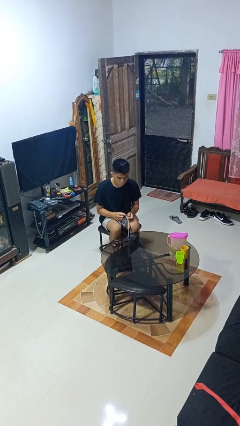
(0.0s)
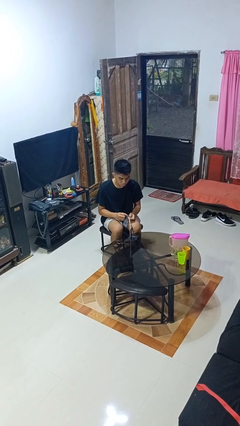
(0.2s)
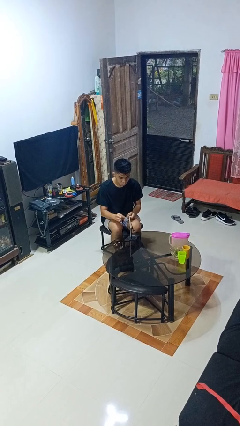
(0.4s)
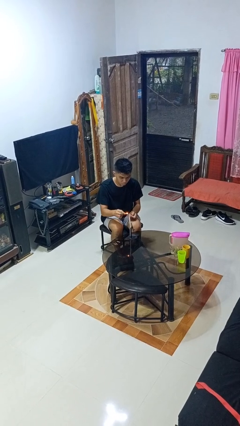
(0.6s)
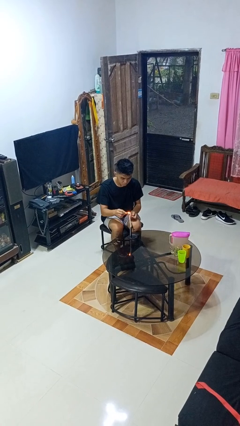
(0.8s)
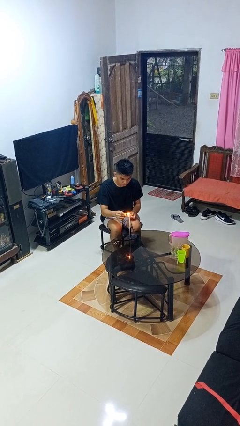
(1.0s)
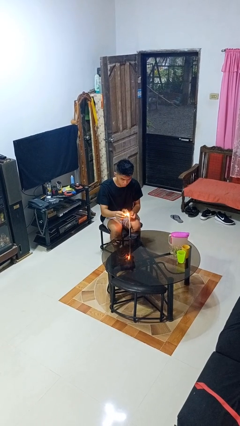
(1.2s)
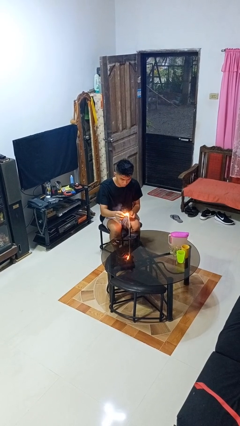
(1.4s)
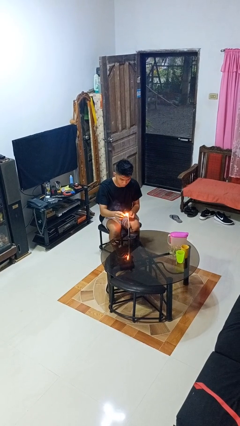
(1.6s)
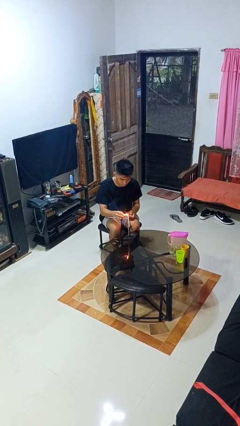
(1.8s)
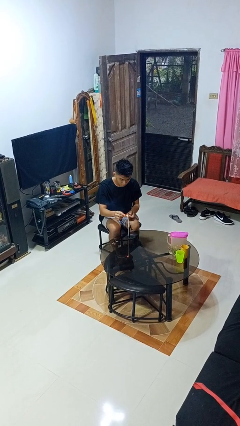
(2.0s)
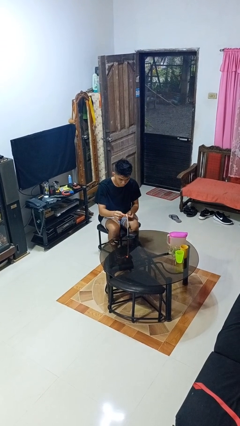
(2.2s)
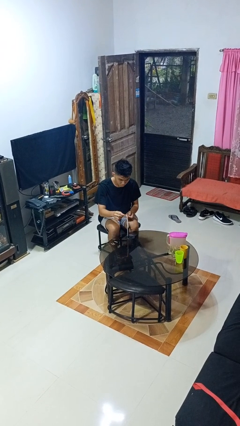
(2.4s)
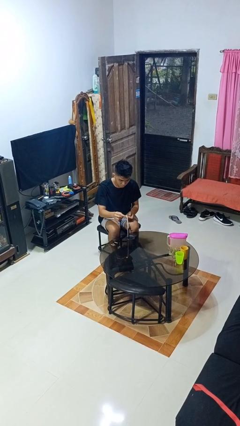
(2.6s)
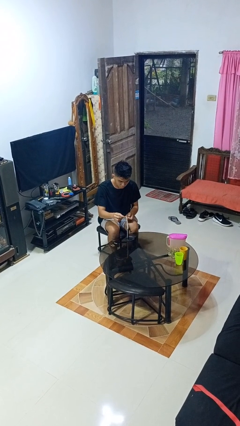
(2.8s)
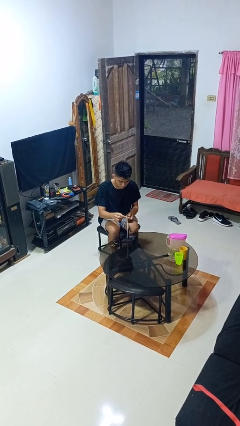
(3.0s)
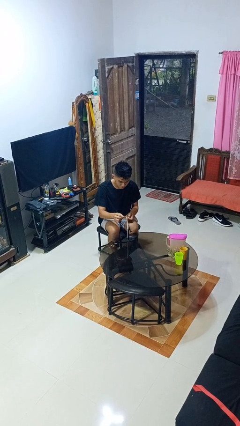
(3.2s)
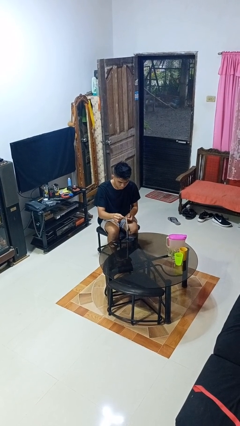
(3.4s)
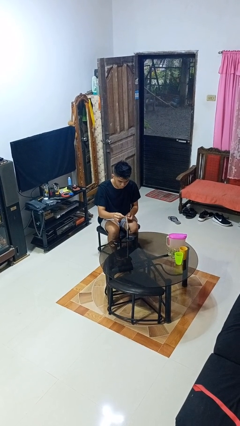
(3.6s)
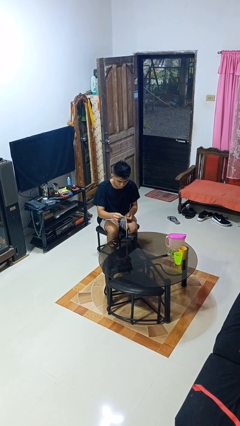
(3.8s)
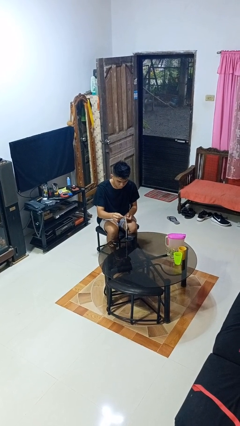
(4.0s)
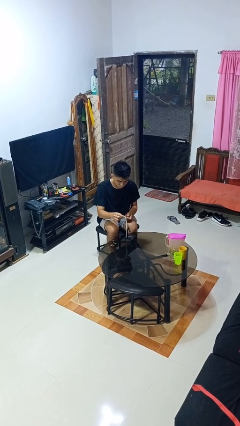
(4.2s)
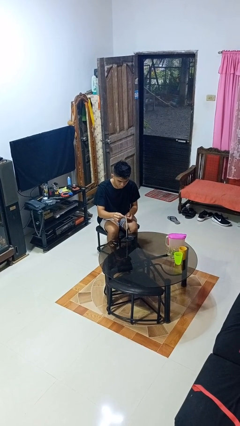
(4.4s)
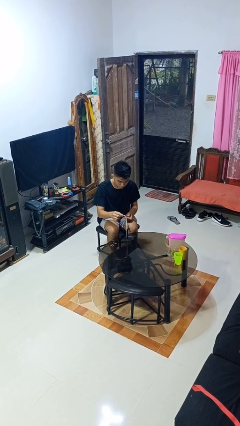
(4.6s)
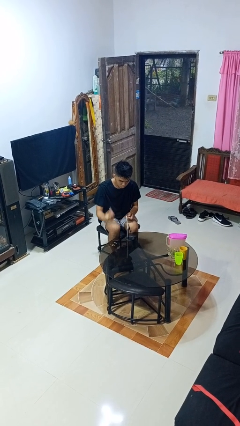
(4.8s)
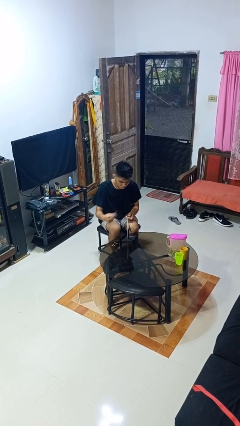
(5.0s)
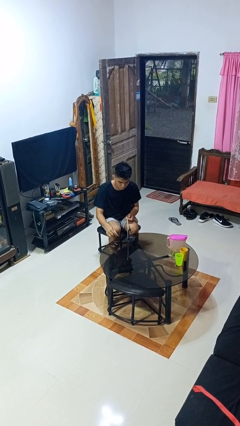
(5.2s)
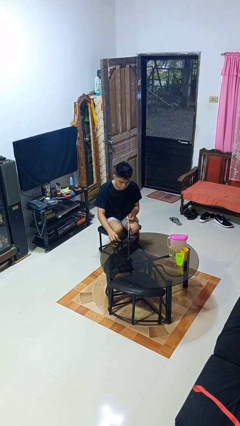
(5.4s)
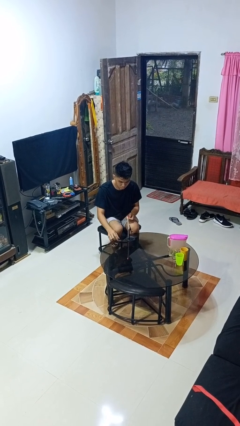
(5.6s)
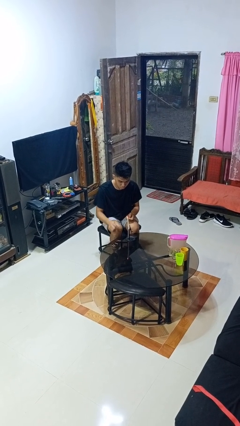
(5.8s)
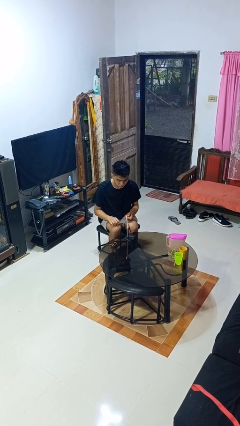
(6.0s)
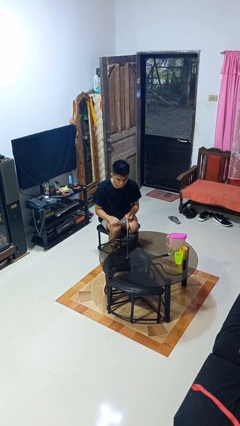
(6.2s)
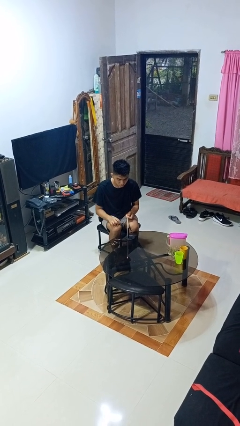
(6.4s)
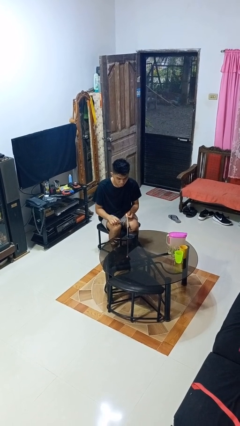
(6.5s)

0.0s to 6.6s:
person lights candle

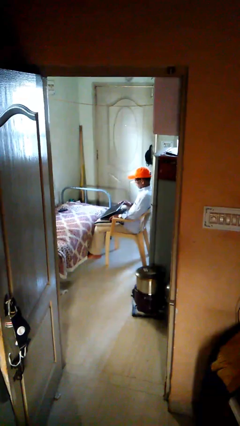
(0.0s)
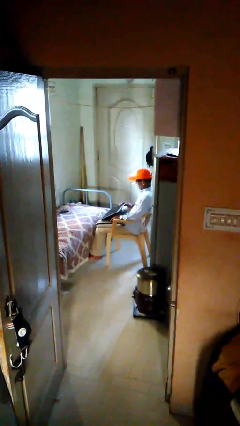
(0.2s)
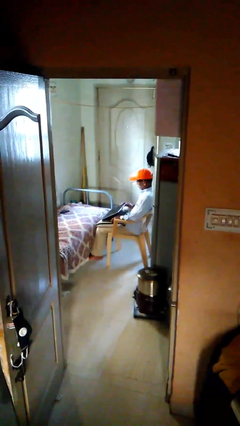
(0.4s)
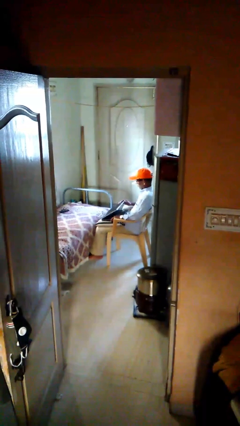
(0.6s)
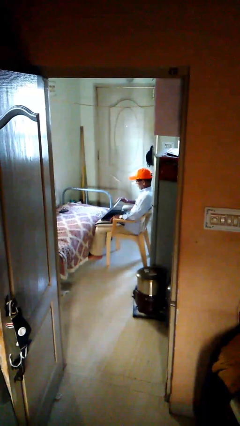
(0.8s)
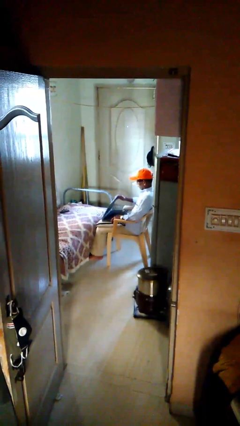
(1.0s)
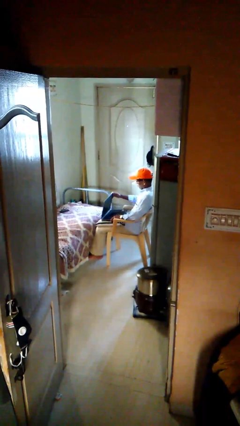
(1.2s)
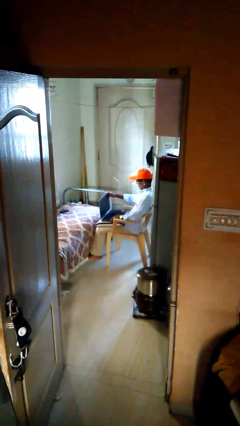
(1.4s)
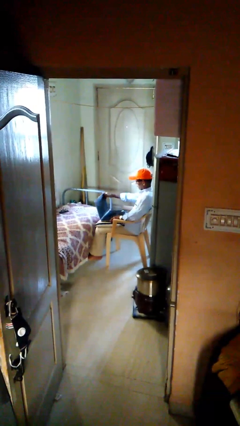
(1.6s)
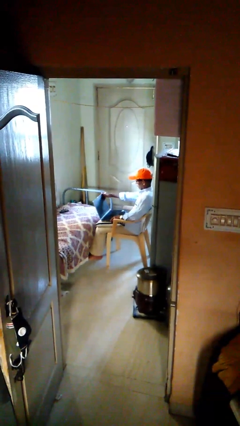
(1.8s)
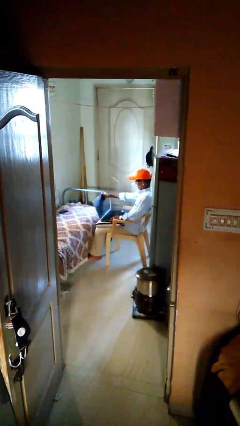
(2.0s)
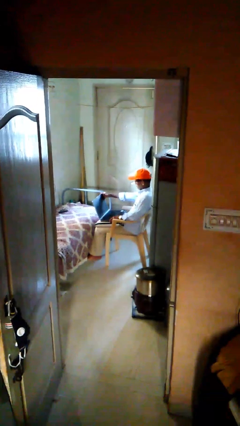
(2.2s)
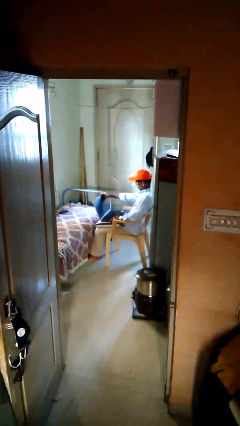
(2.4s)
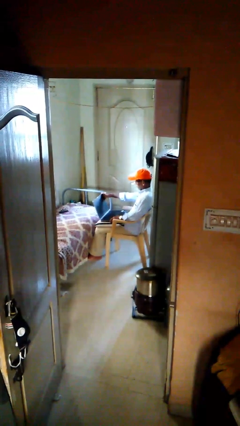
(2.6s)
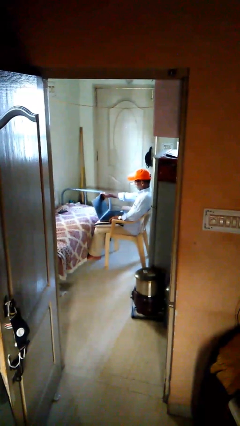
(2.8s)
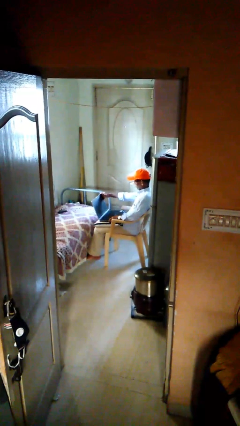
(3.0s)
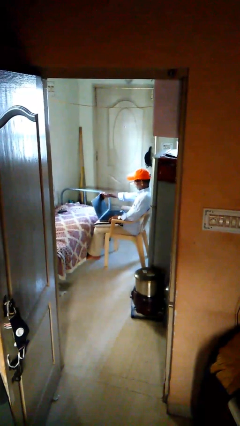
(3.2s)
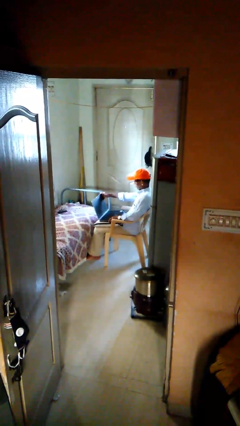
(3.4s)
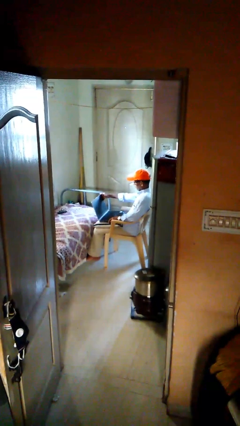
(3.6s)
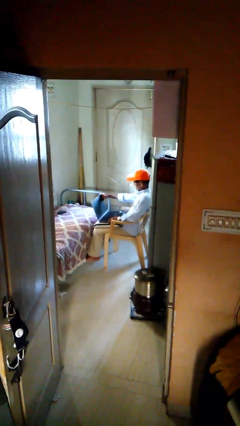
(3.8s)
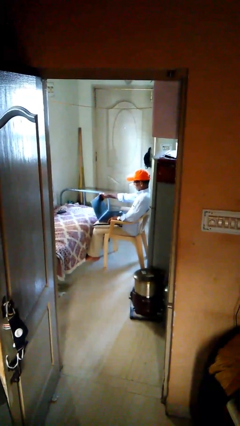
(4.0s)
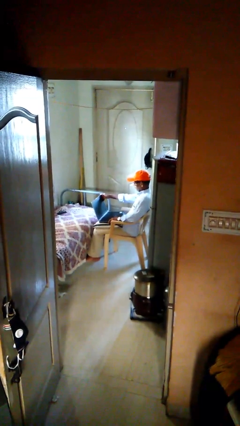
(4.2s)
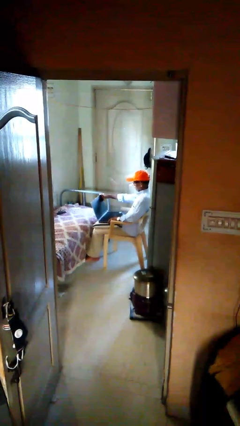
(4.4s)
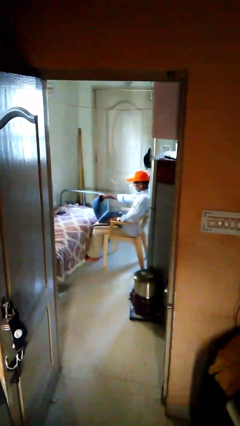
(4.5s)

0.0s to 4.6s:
person interacts with laptop

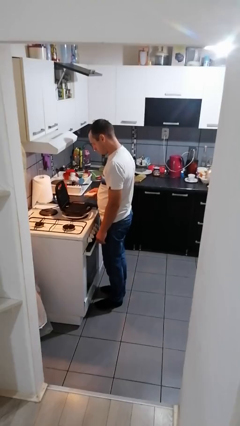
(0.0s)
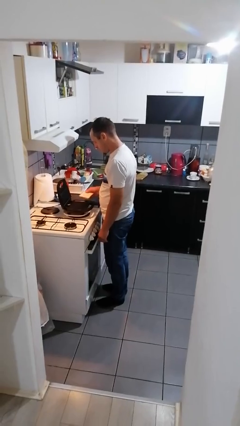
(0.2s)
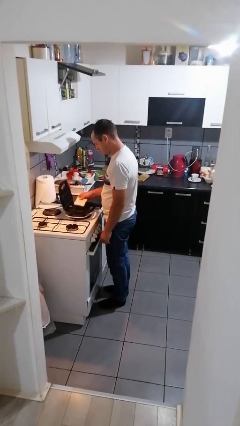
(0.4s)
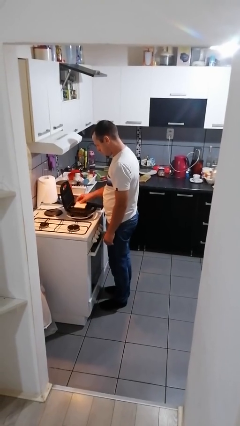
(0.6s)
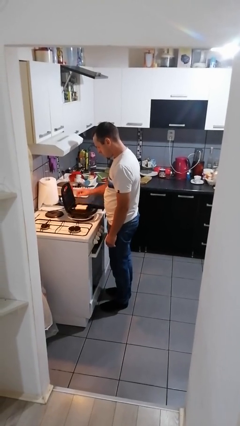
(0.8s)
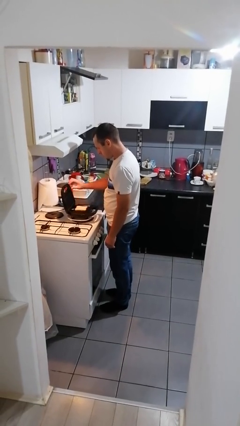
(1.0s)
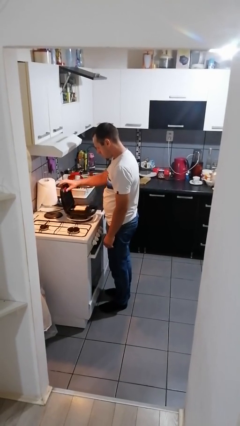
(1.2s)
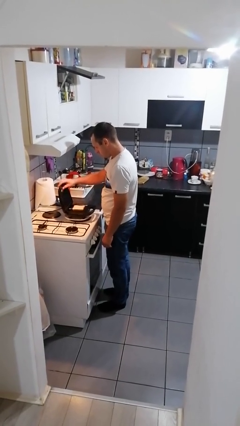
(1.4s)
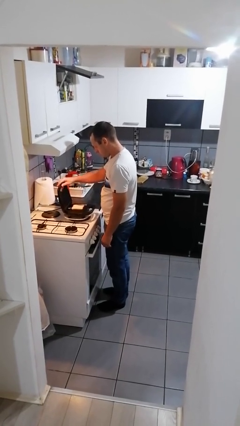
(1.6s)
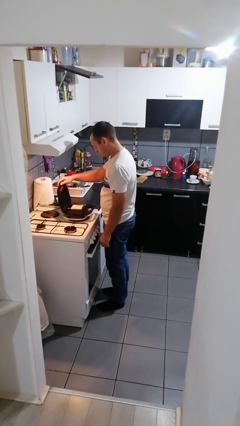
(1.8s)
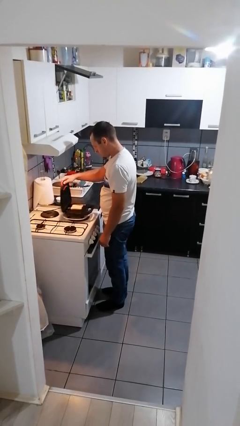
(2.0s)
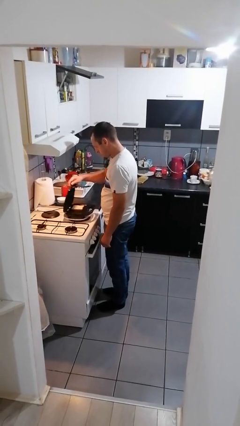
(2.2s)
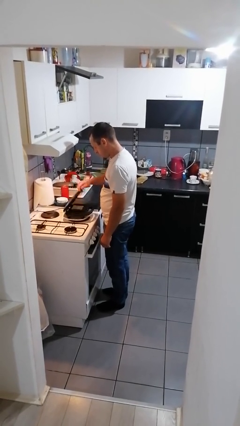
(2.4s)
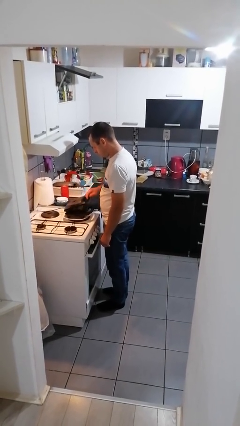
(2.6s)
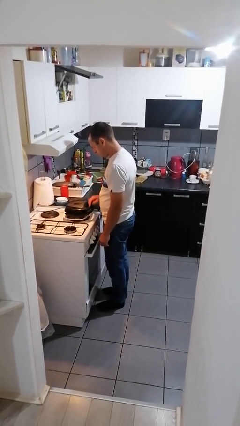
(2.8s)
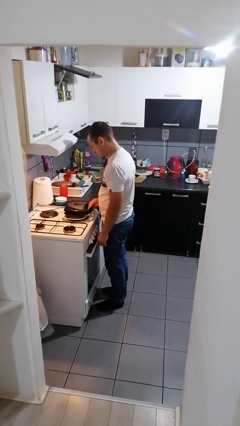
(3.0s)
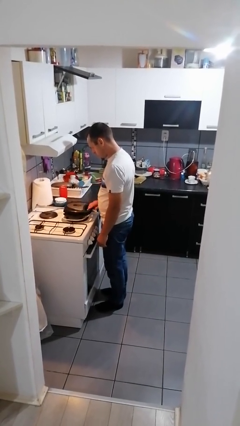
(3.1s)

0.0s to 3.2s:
person puts object into toaster

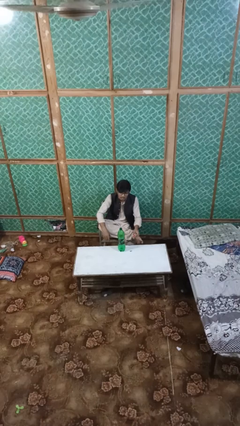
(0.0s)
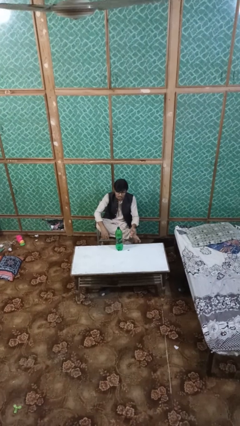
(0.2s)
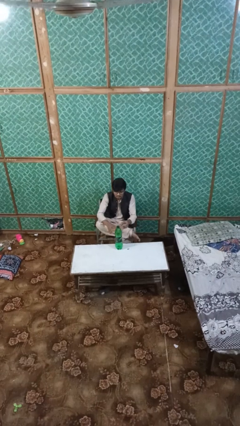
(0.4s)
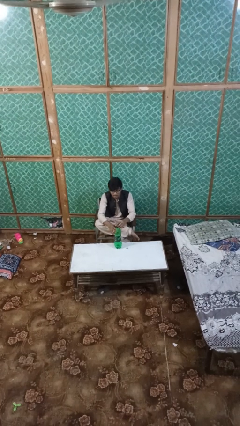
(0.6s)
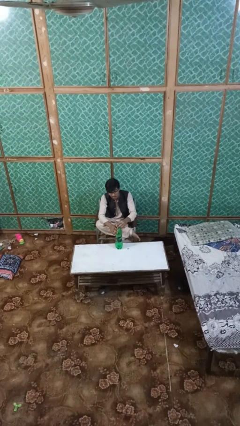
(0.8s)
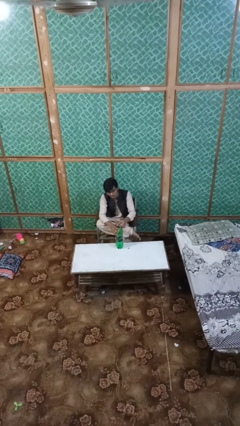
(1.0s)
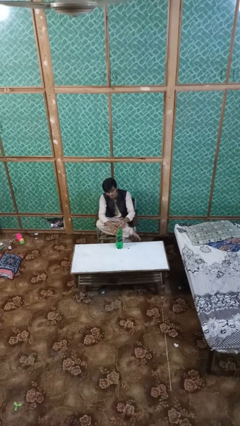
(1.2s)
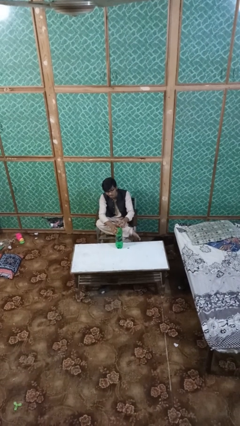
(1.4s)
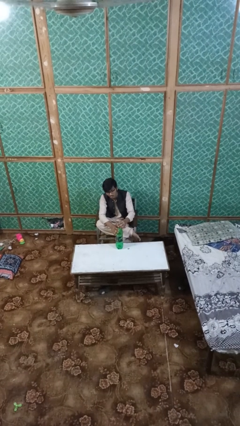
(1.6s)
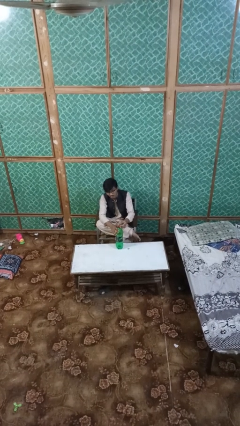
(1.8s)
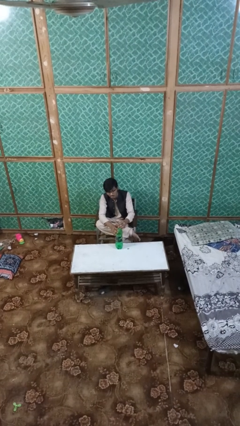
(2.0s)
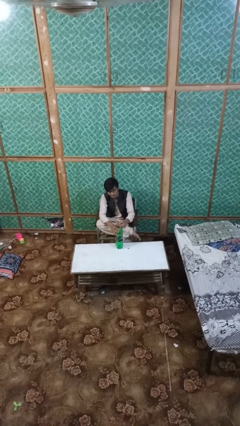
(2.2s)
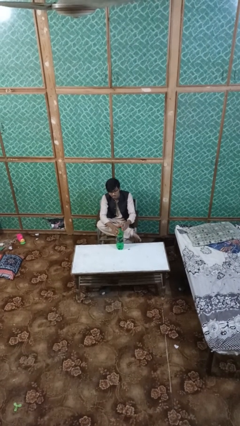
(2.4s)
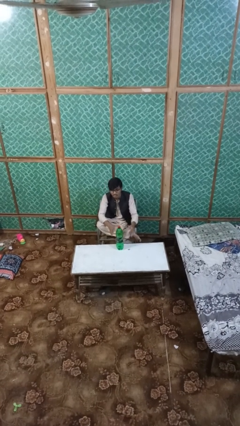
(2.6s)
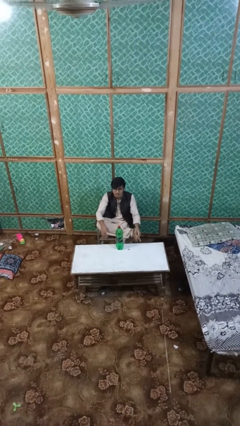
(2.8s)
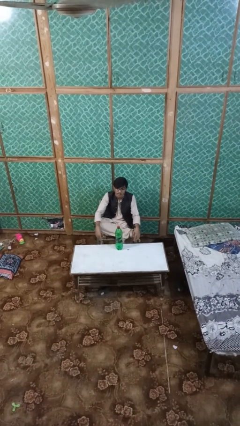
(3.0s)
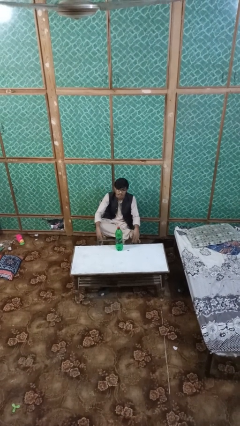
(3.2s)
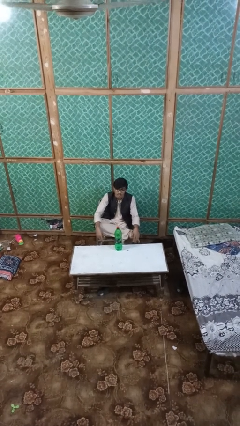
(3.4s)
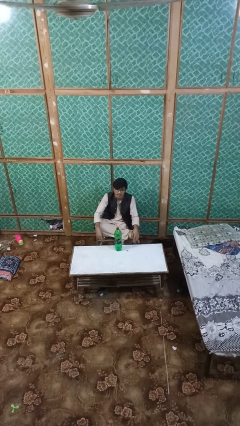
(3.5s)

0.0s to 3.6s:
person screws lid to bottle
